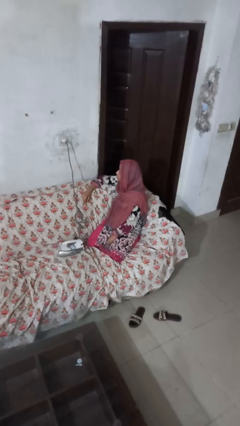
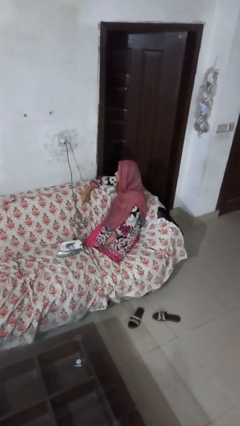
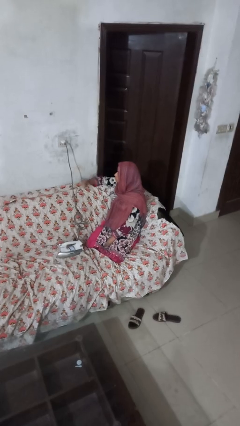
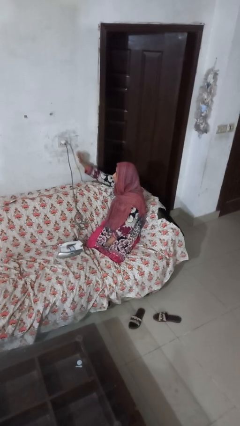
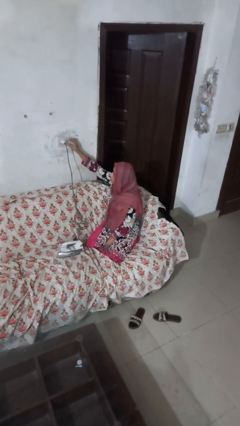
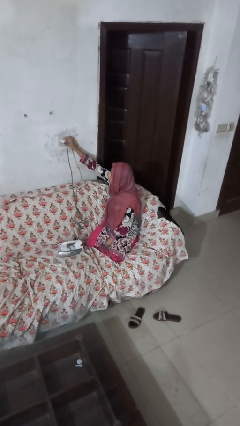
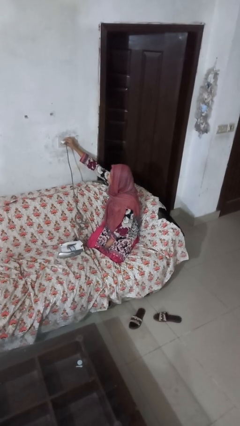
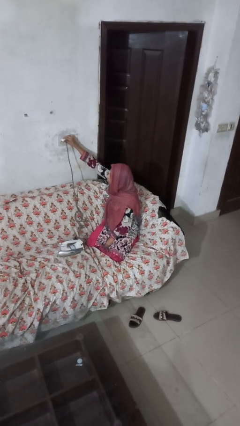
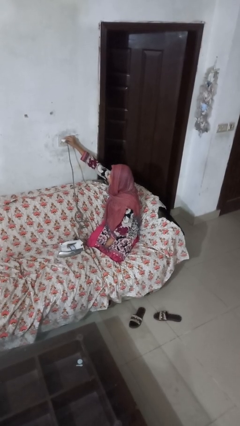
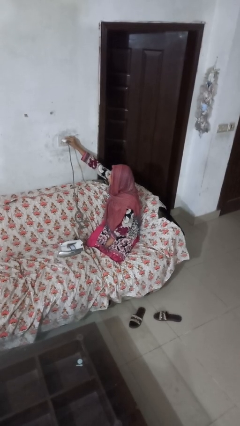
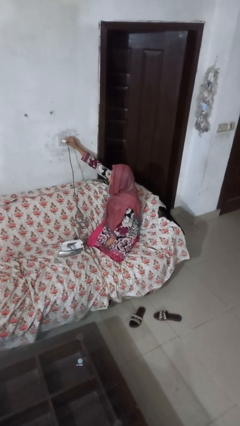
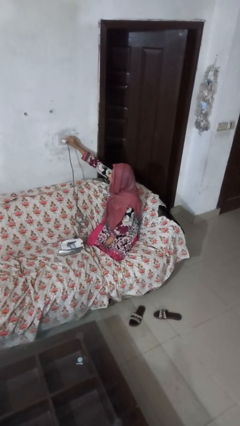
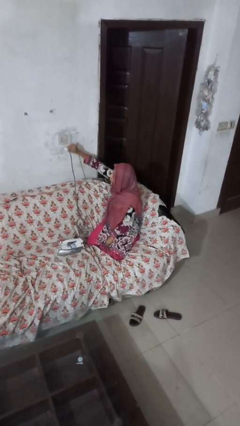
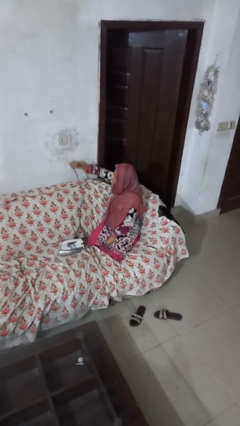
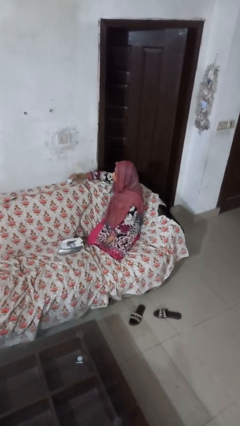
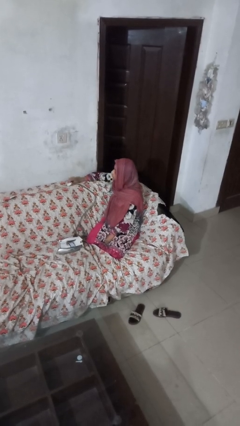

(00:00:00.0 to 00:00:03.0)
person unplugs from electrical socket

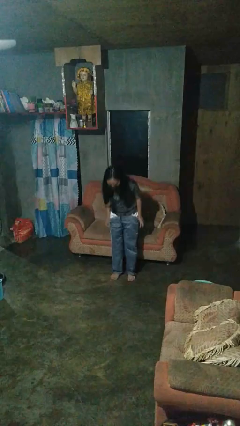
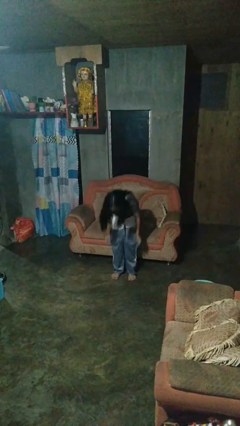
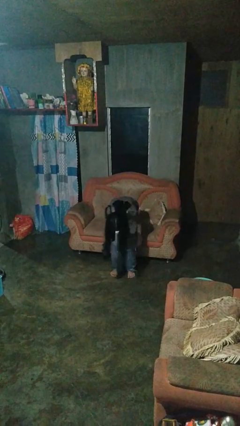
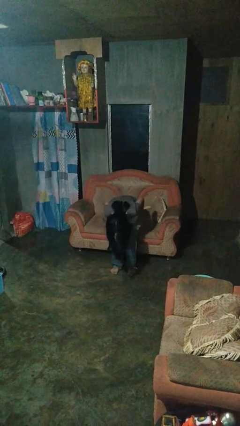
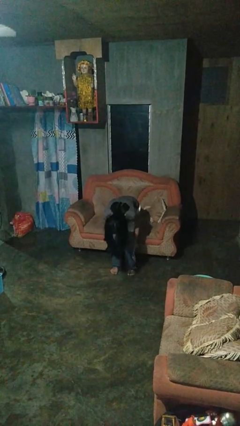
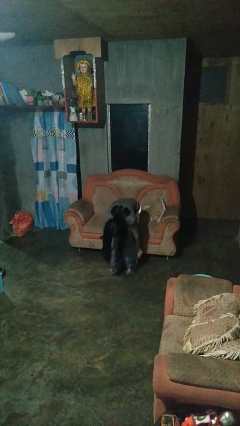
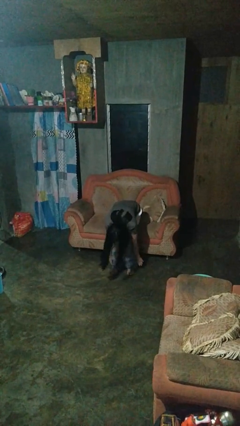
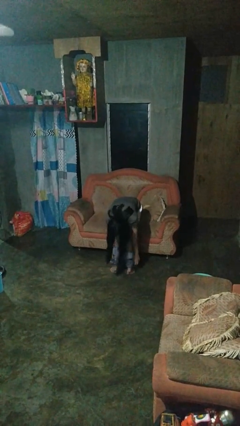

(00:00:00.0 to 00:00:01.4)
person takes off pants

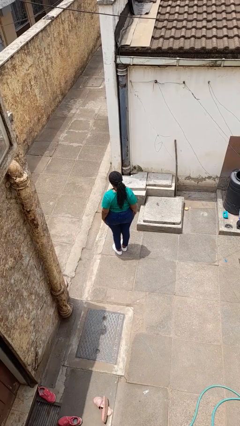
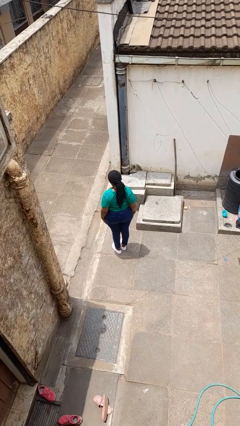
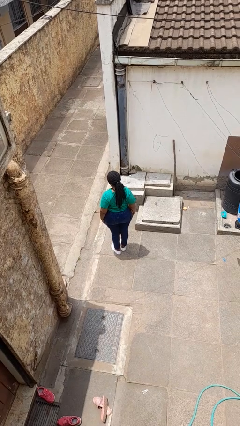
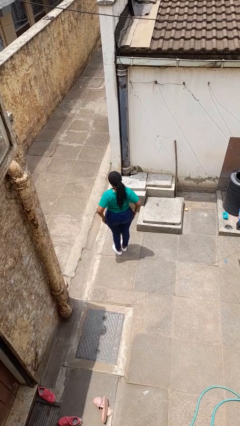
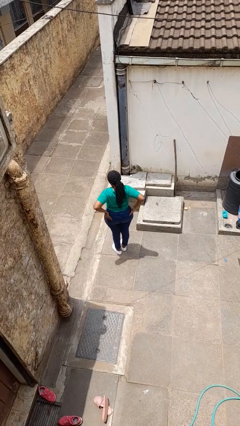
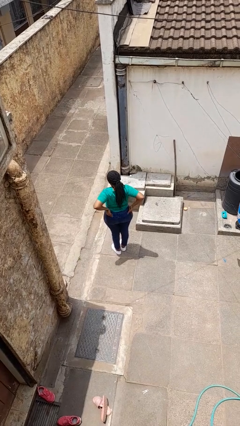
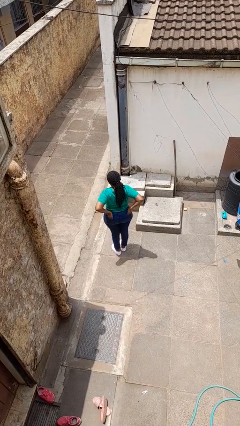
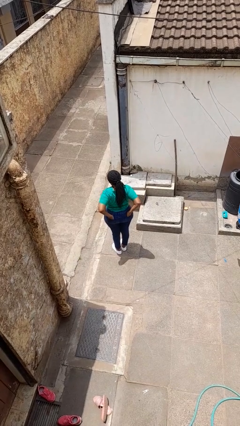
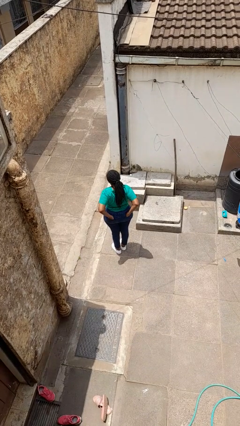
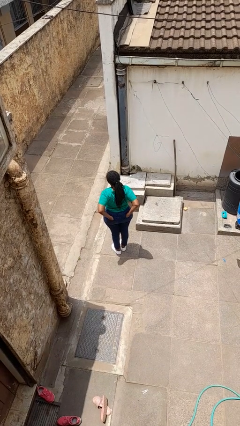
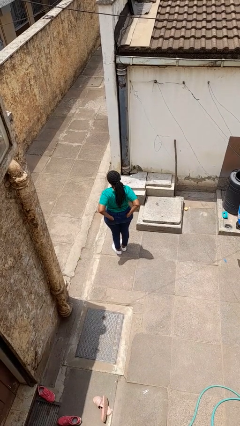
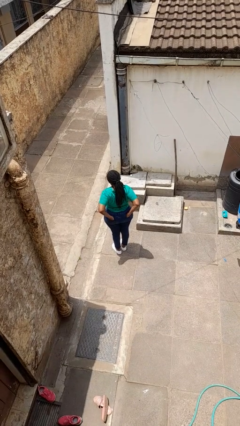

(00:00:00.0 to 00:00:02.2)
person puts hands in back pockets

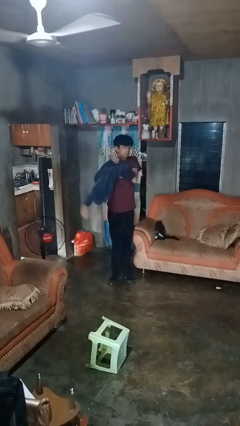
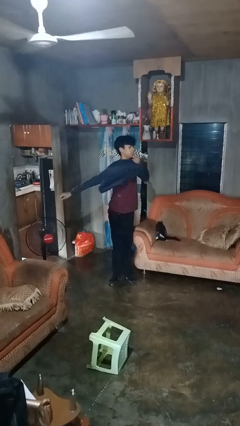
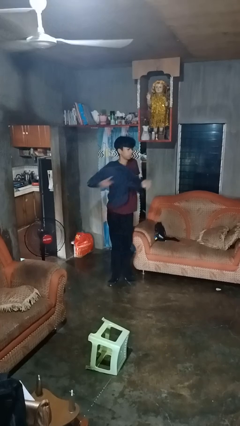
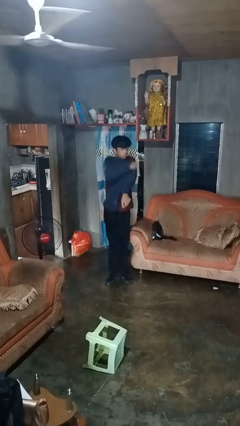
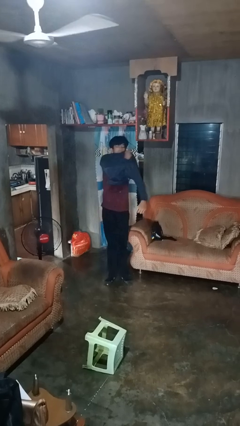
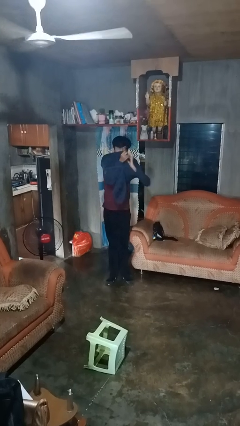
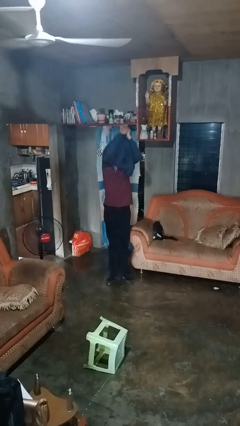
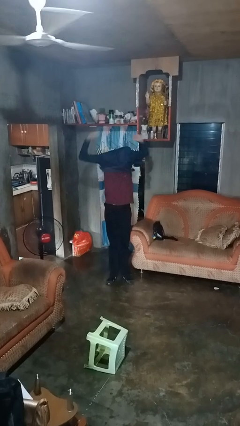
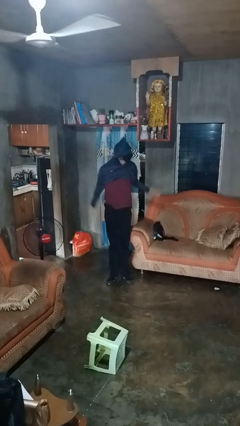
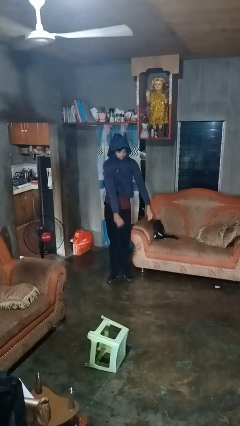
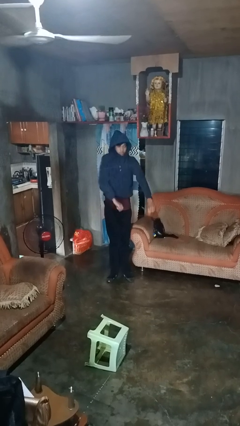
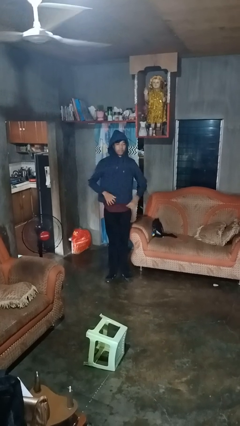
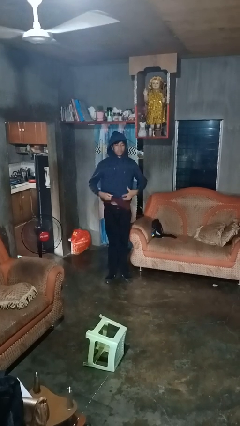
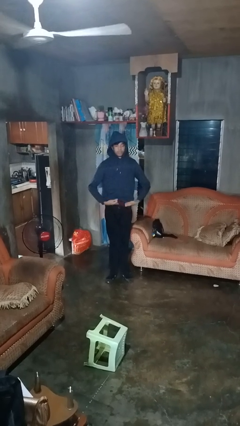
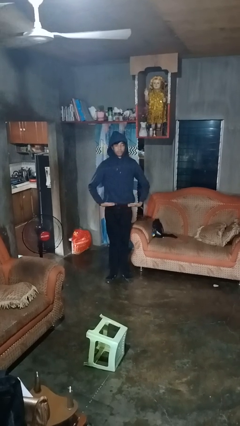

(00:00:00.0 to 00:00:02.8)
person puts on hoodie

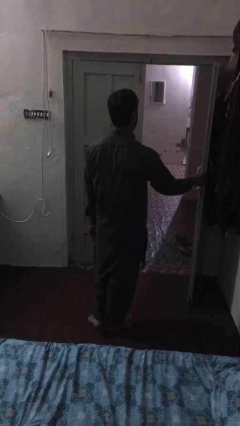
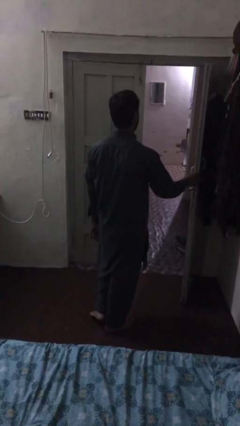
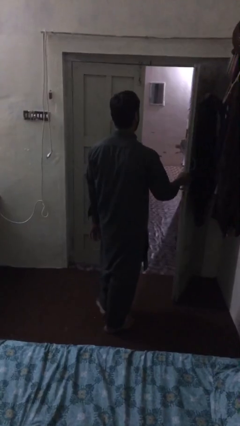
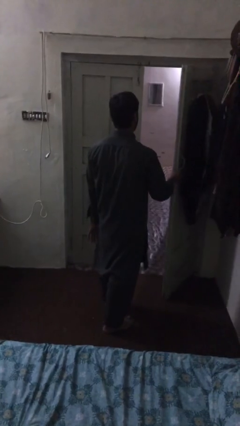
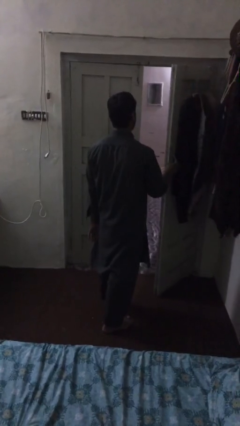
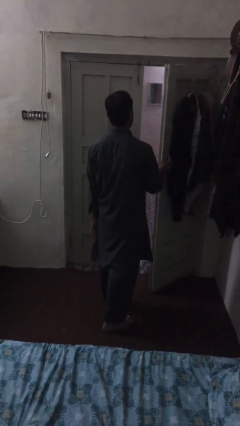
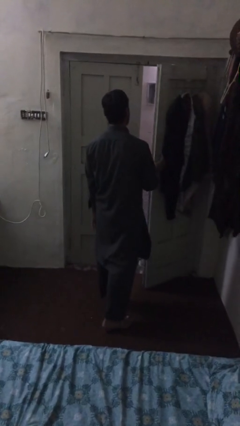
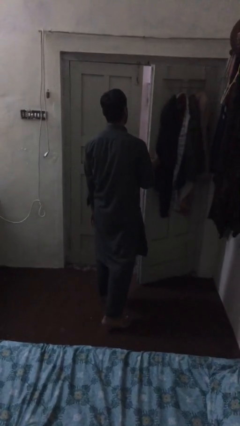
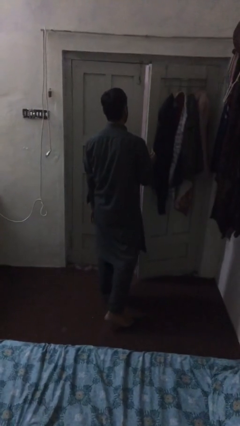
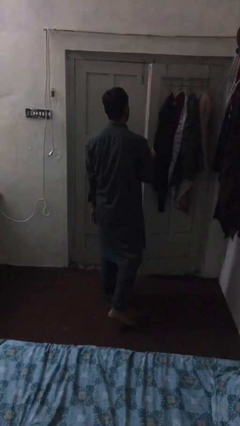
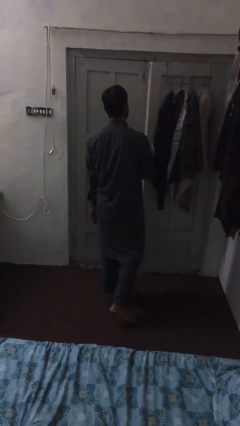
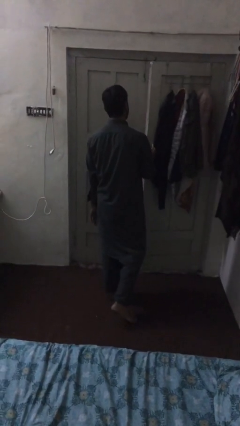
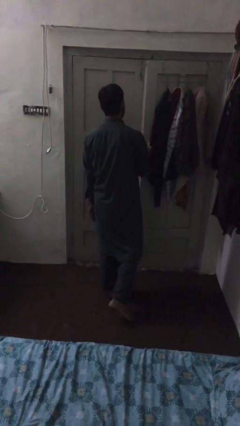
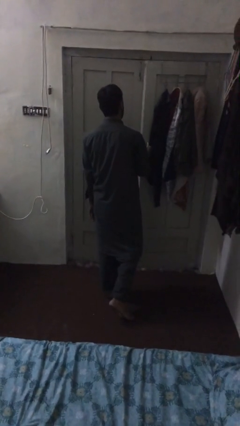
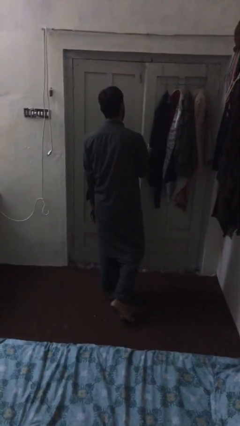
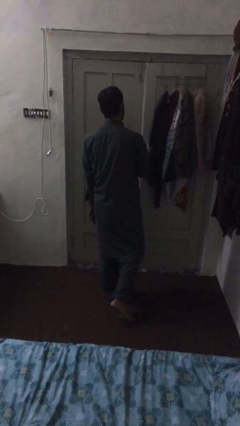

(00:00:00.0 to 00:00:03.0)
person closes facility door

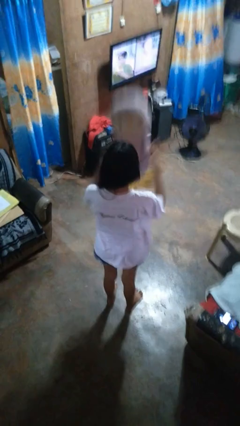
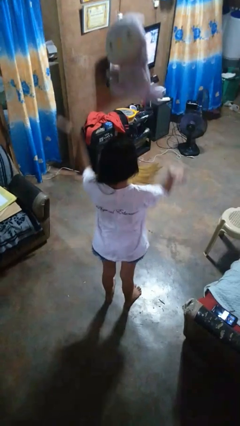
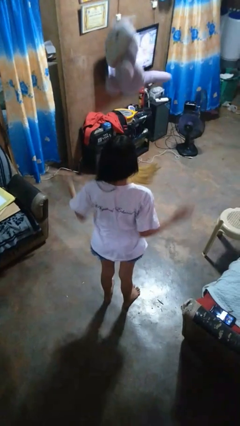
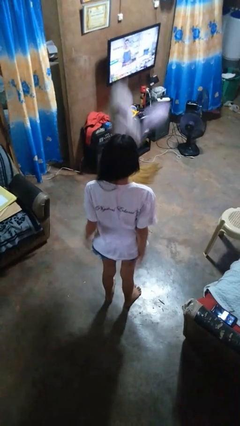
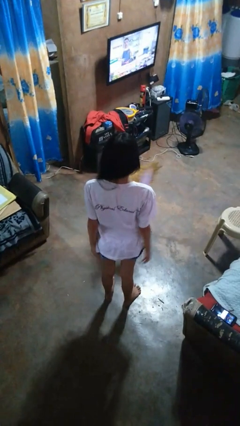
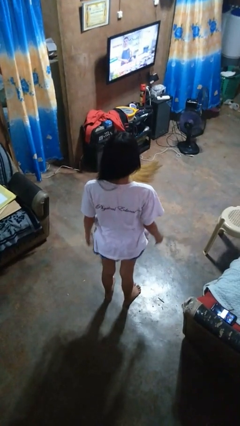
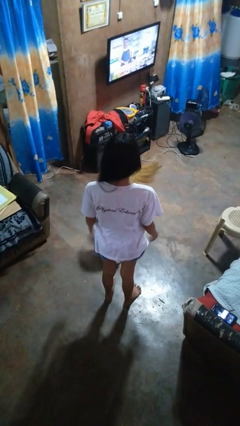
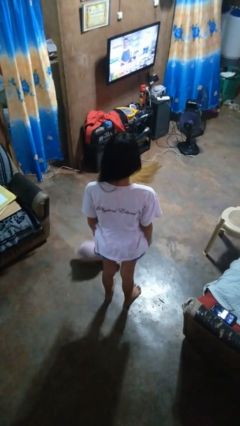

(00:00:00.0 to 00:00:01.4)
person throws object into air

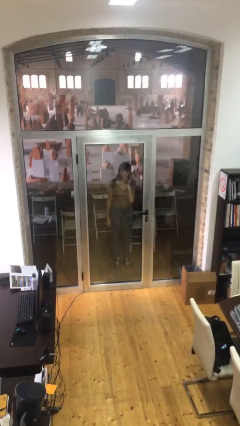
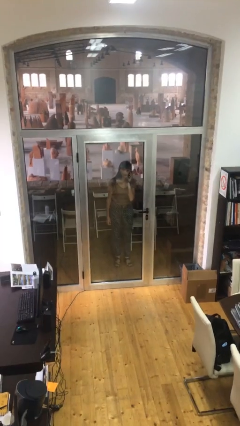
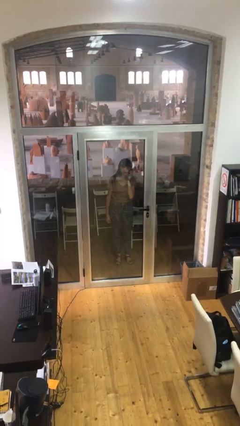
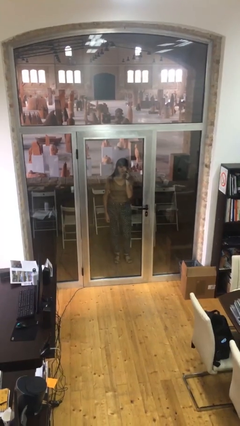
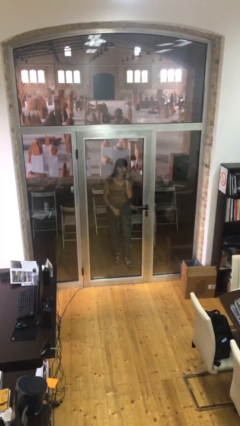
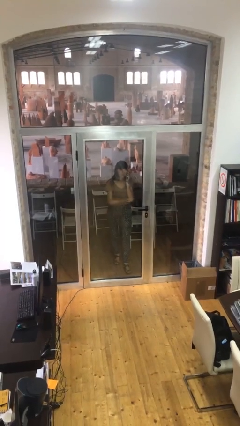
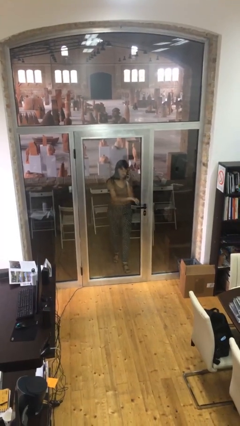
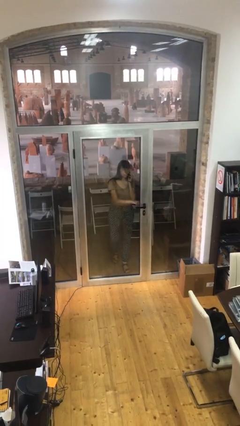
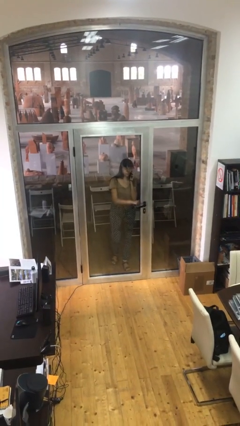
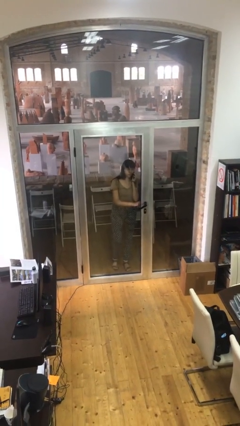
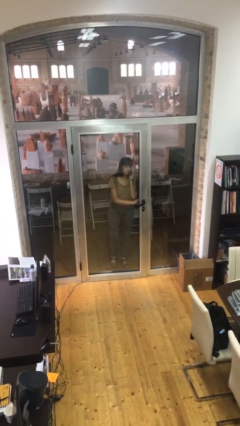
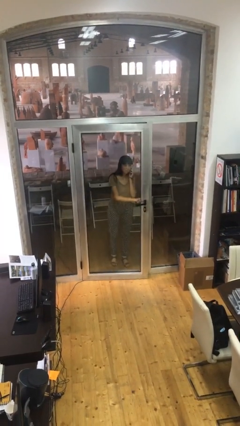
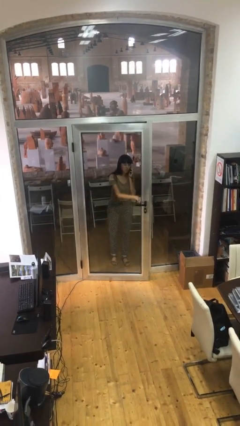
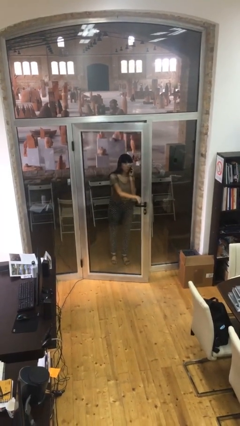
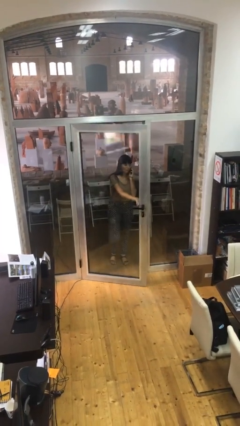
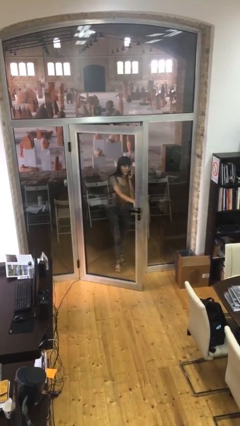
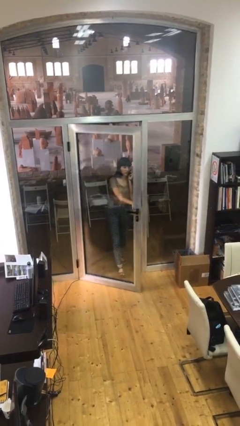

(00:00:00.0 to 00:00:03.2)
person opens facility door
